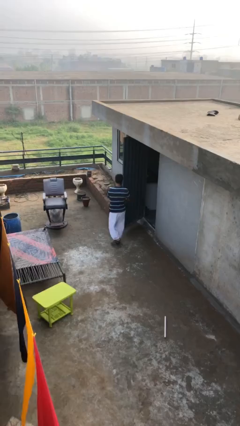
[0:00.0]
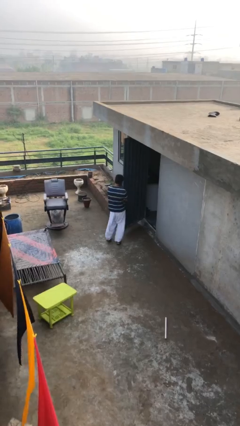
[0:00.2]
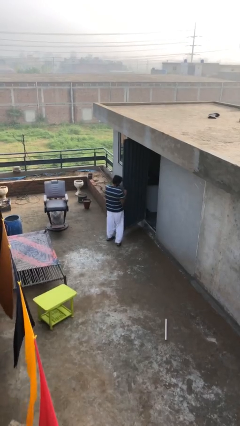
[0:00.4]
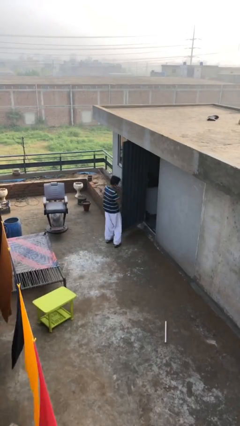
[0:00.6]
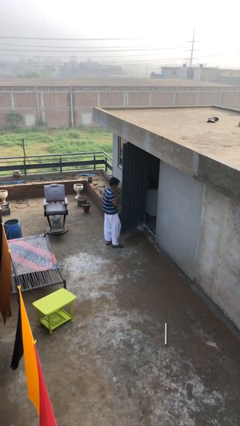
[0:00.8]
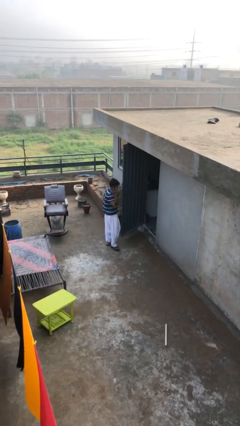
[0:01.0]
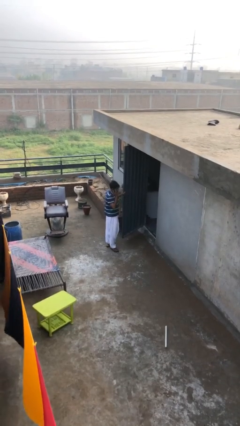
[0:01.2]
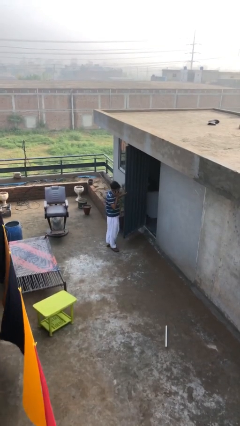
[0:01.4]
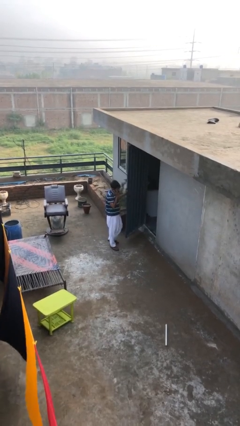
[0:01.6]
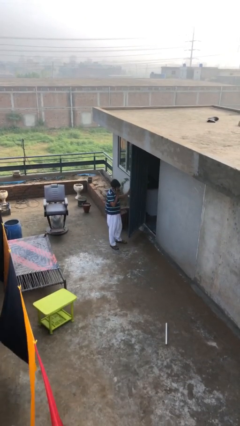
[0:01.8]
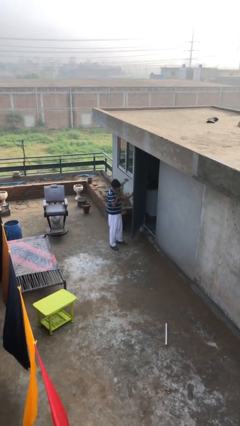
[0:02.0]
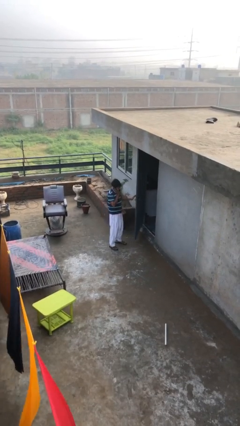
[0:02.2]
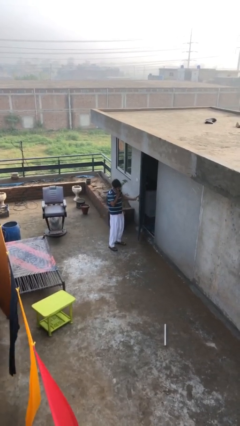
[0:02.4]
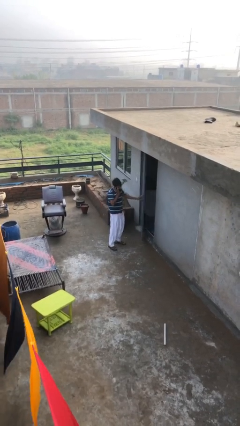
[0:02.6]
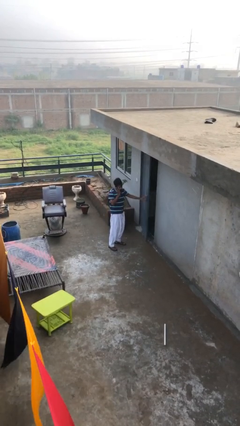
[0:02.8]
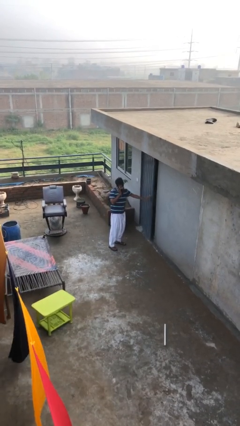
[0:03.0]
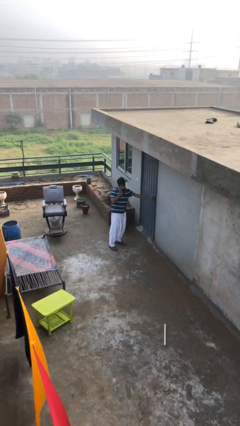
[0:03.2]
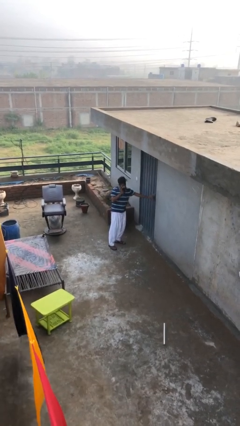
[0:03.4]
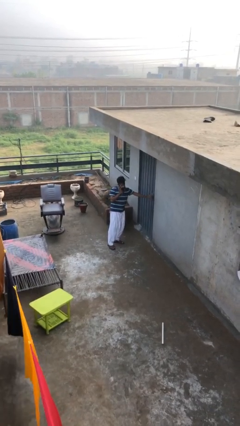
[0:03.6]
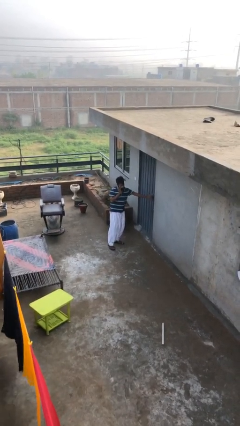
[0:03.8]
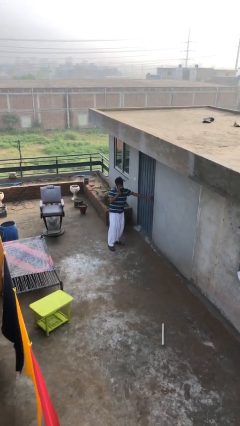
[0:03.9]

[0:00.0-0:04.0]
person closes facility door

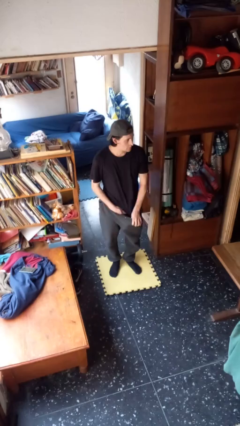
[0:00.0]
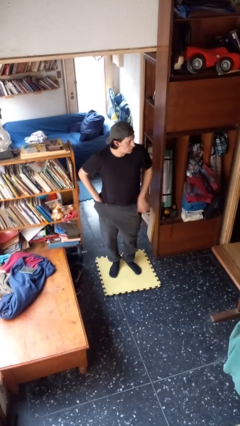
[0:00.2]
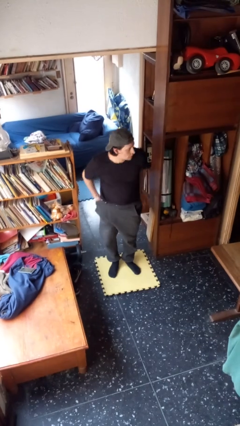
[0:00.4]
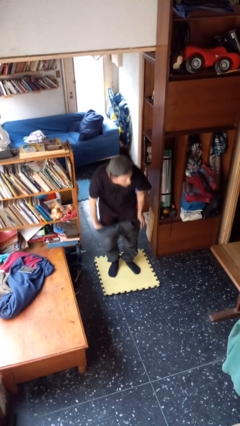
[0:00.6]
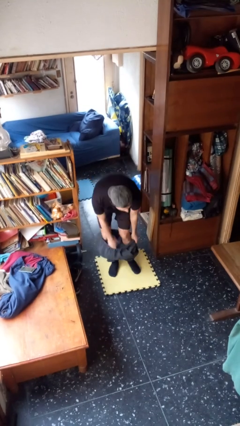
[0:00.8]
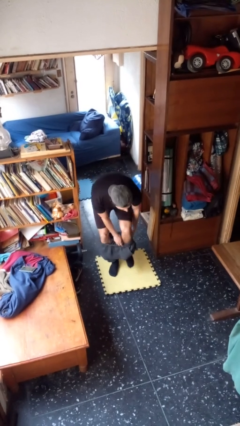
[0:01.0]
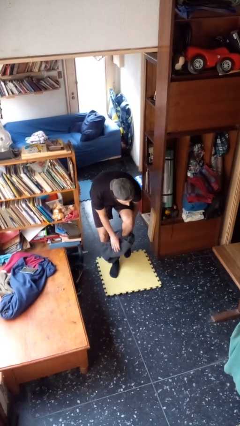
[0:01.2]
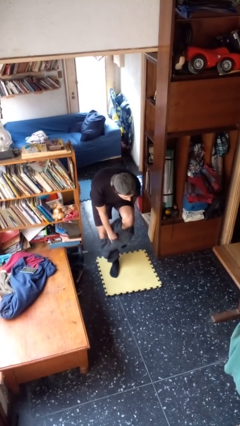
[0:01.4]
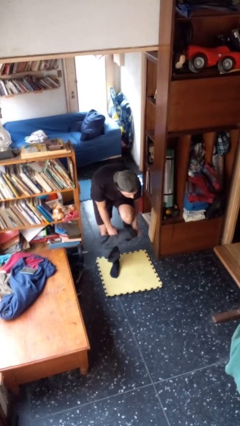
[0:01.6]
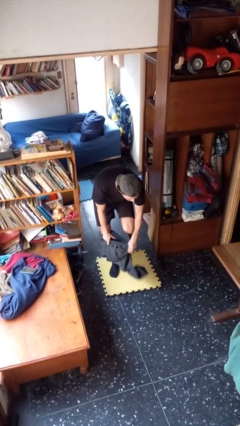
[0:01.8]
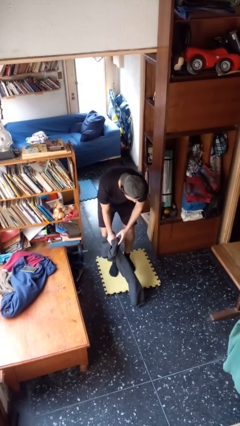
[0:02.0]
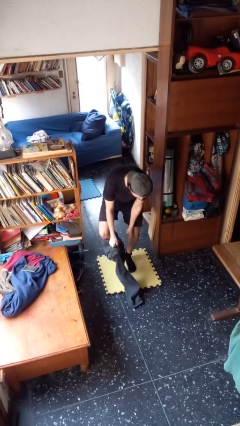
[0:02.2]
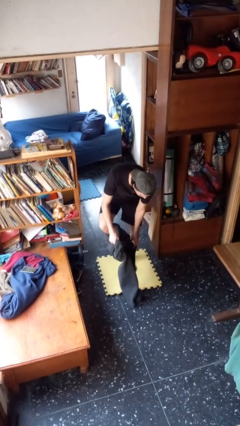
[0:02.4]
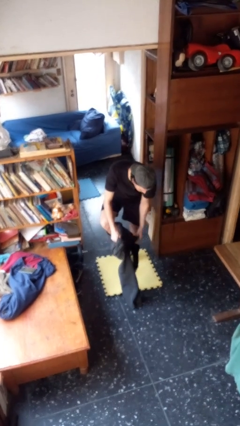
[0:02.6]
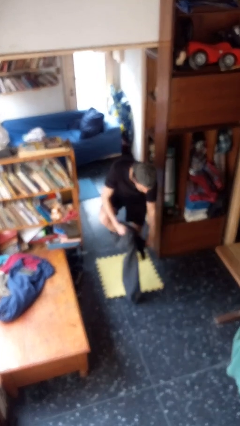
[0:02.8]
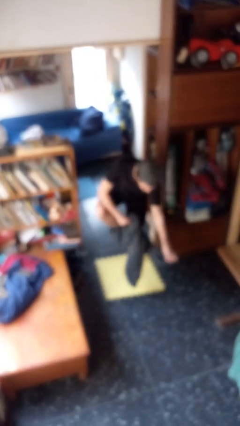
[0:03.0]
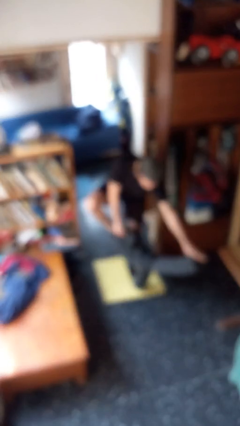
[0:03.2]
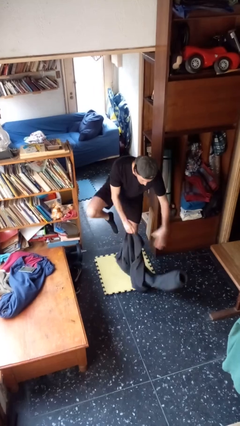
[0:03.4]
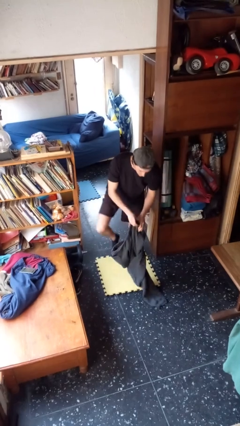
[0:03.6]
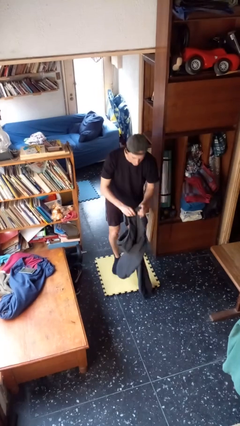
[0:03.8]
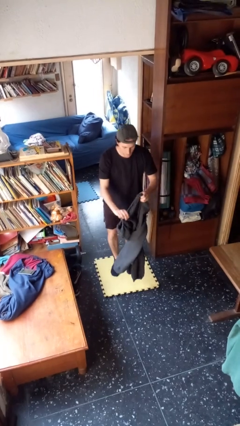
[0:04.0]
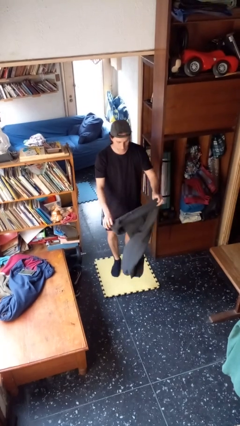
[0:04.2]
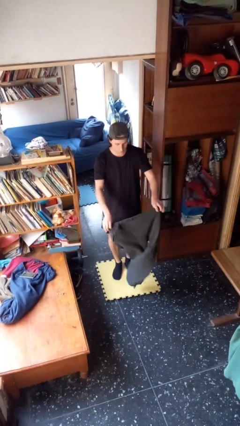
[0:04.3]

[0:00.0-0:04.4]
person takes off pants

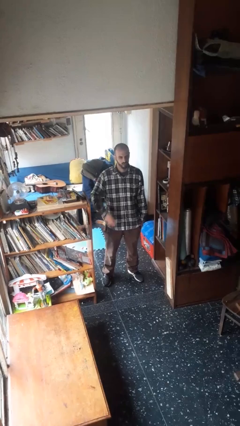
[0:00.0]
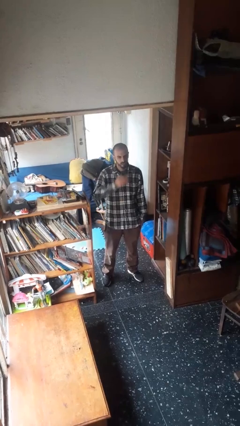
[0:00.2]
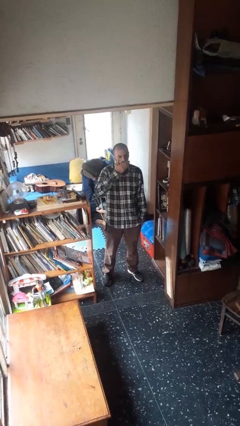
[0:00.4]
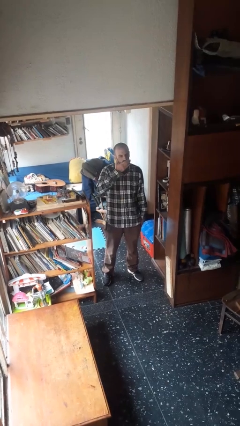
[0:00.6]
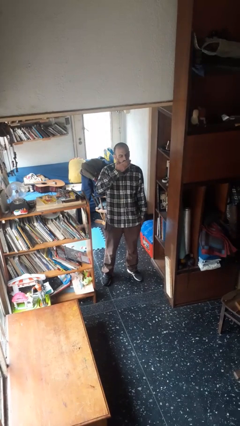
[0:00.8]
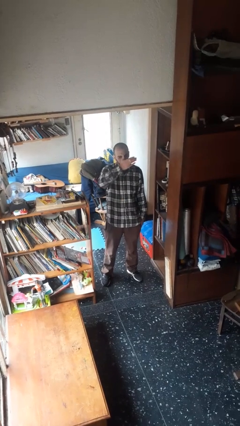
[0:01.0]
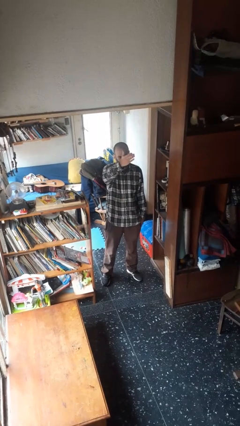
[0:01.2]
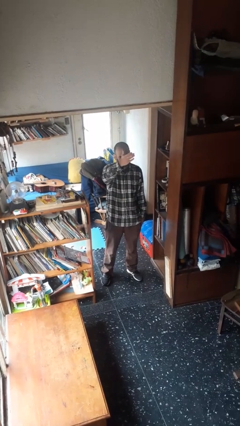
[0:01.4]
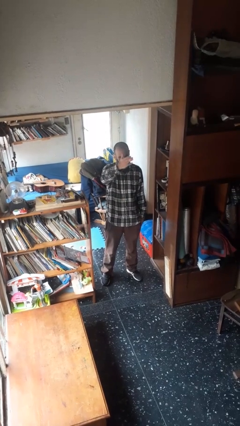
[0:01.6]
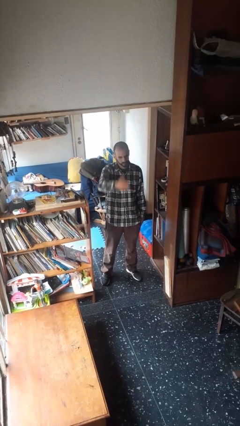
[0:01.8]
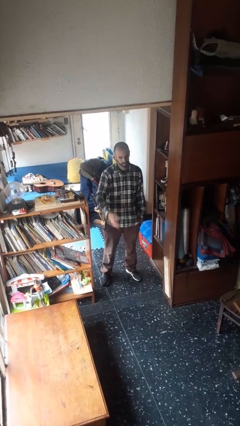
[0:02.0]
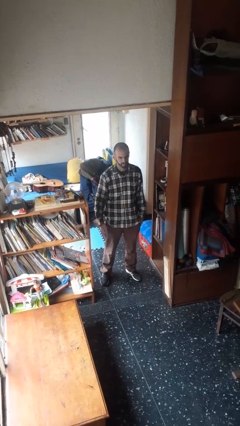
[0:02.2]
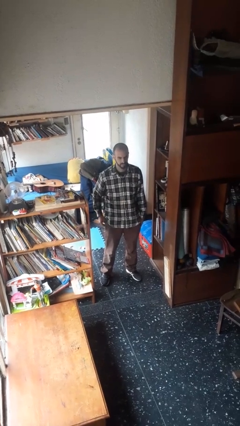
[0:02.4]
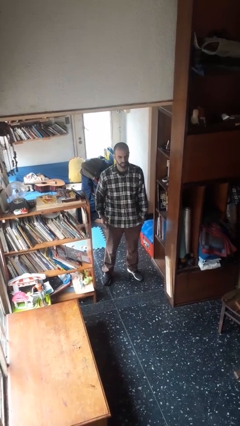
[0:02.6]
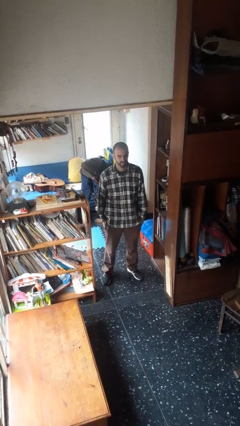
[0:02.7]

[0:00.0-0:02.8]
person gestures blow kiss

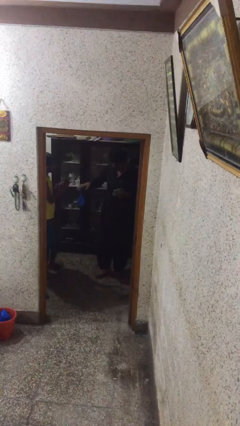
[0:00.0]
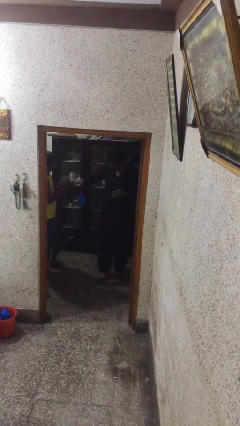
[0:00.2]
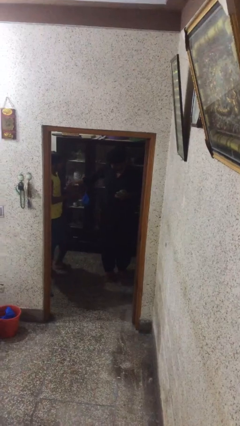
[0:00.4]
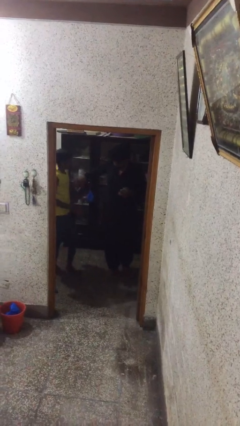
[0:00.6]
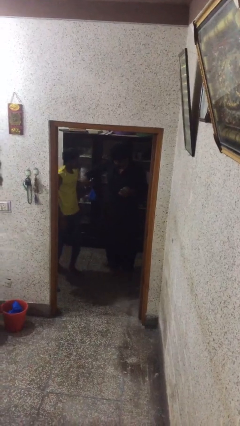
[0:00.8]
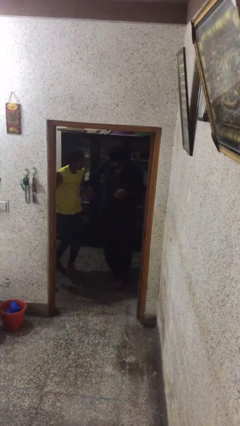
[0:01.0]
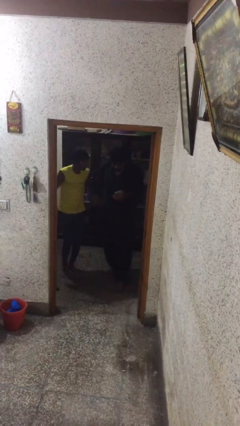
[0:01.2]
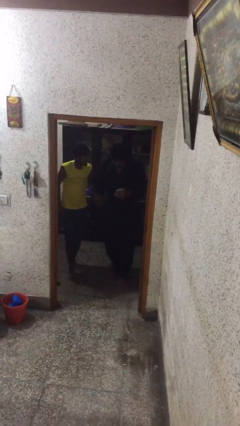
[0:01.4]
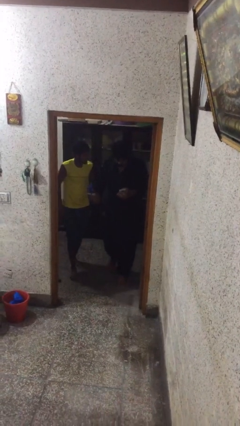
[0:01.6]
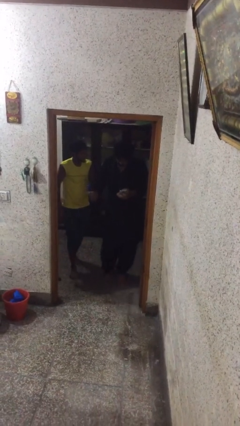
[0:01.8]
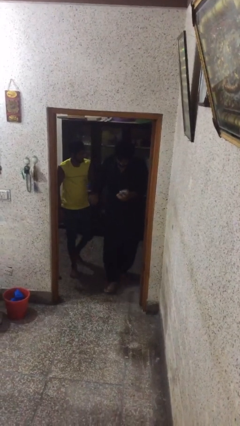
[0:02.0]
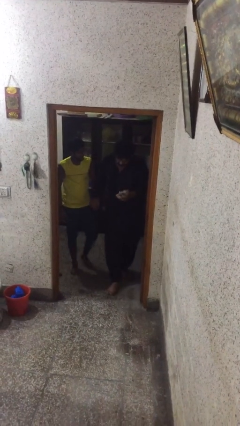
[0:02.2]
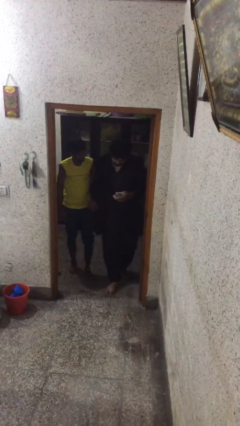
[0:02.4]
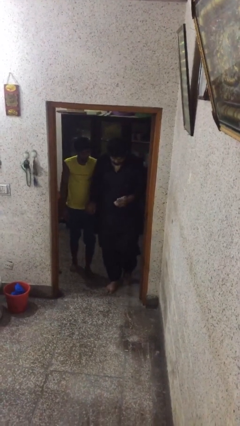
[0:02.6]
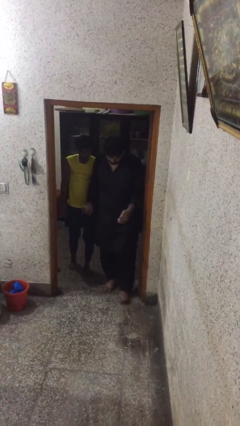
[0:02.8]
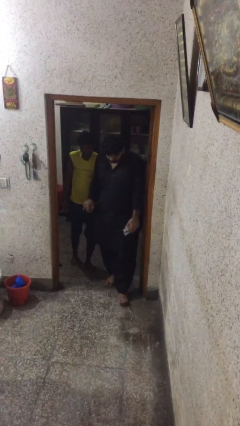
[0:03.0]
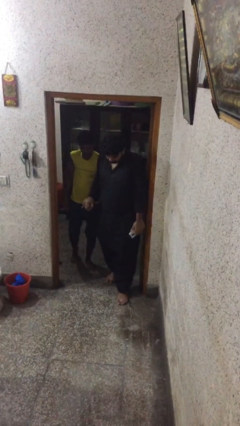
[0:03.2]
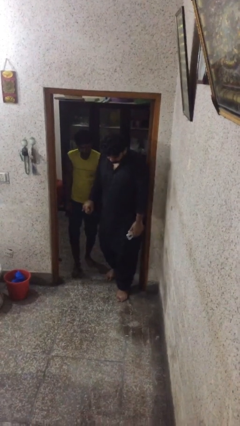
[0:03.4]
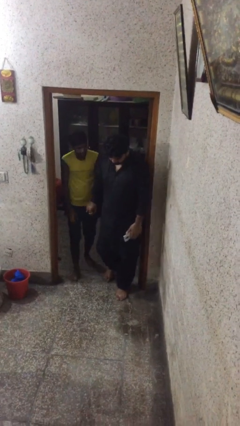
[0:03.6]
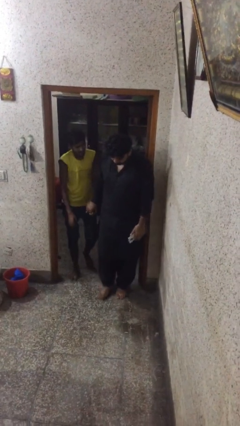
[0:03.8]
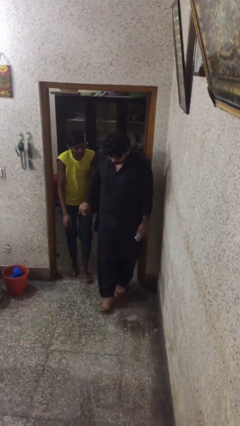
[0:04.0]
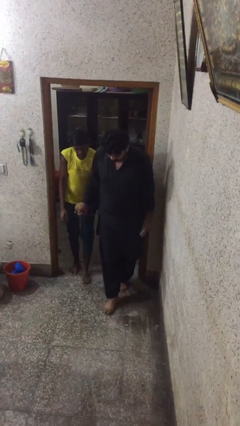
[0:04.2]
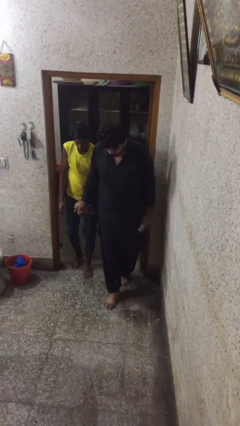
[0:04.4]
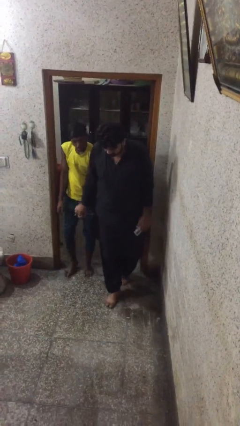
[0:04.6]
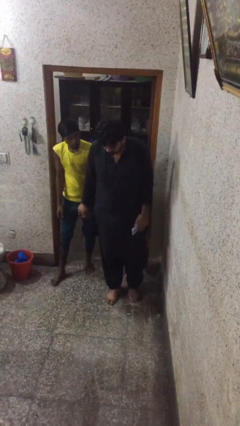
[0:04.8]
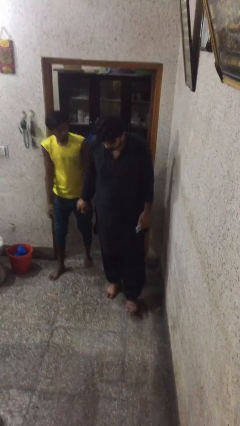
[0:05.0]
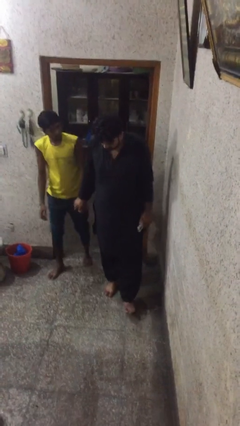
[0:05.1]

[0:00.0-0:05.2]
person holds hand

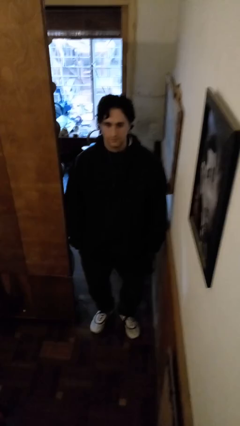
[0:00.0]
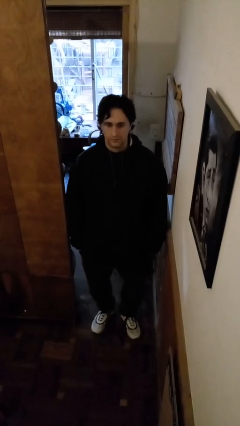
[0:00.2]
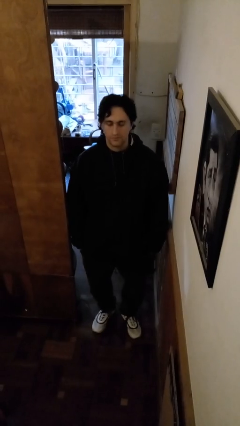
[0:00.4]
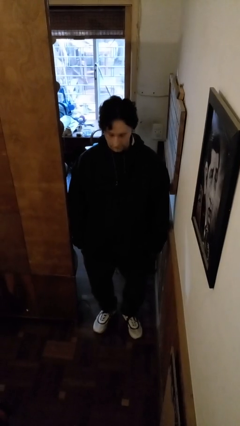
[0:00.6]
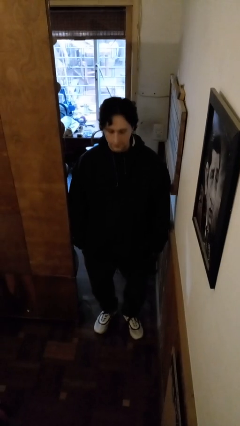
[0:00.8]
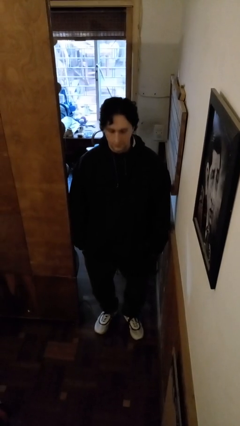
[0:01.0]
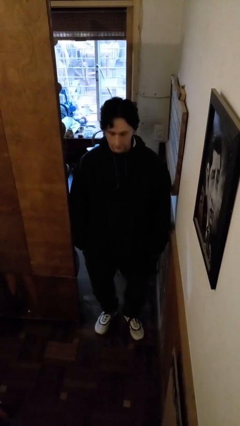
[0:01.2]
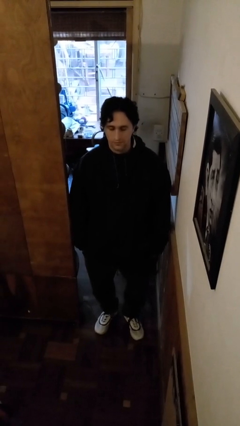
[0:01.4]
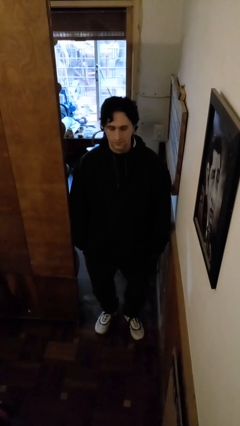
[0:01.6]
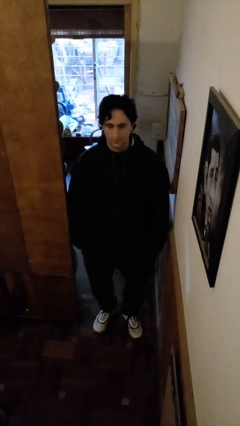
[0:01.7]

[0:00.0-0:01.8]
person nods head
